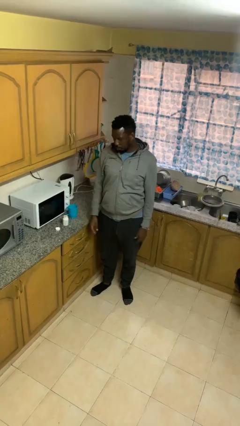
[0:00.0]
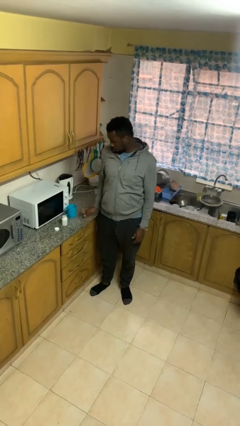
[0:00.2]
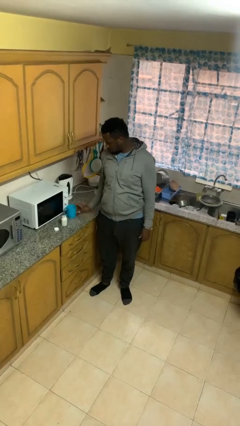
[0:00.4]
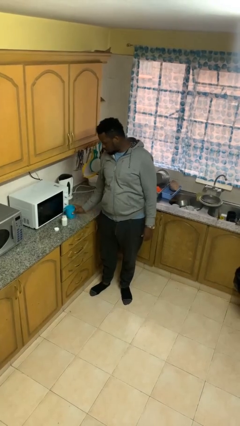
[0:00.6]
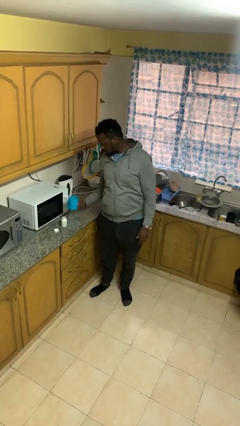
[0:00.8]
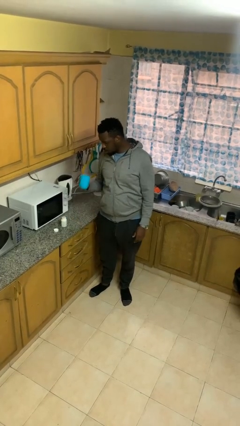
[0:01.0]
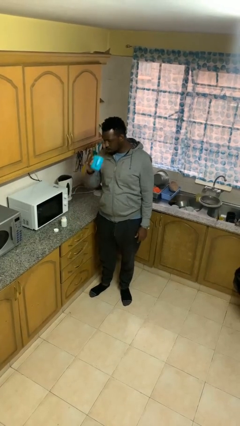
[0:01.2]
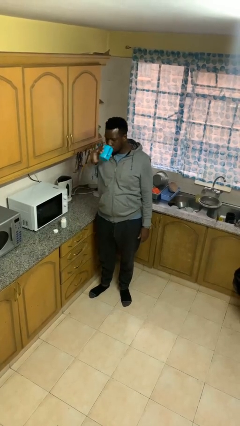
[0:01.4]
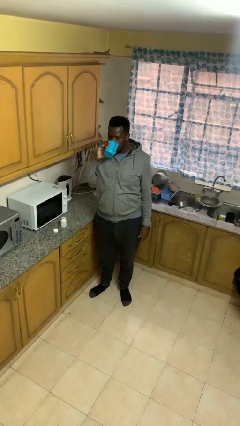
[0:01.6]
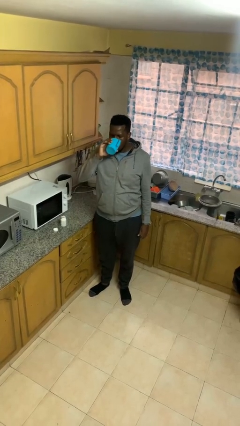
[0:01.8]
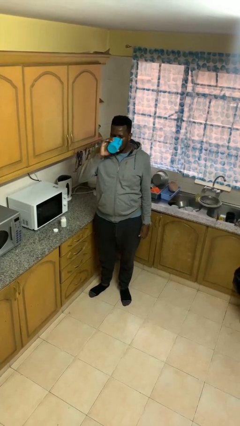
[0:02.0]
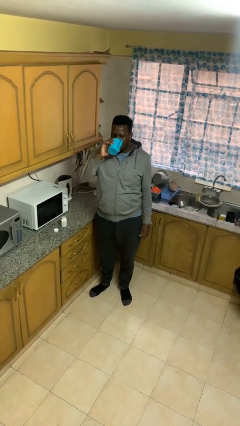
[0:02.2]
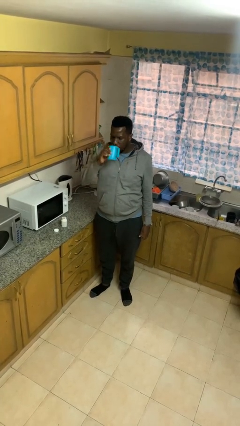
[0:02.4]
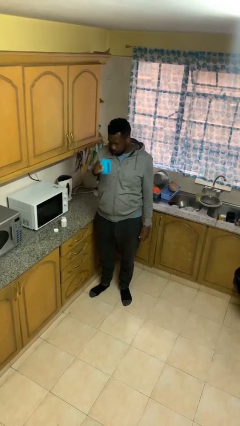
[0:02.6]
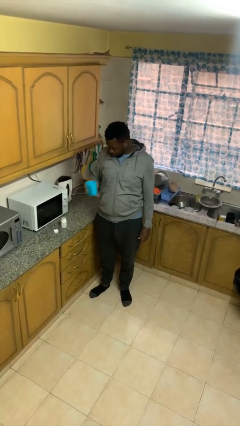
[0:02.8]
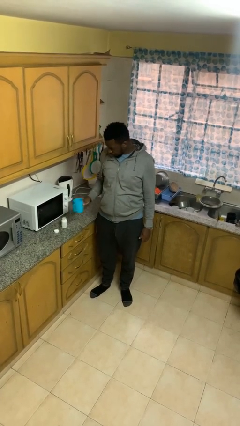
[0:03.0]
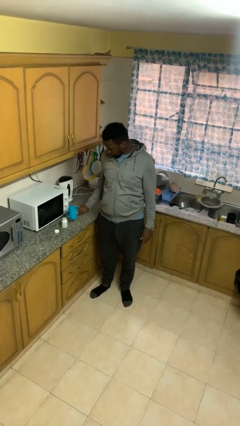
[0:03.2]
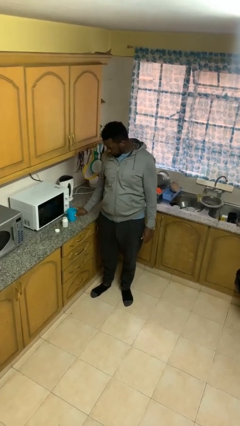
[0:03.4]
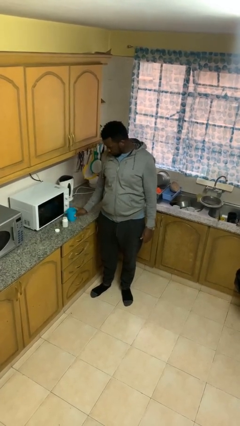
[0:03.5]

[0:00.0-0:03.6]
person drinks from cup

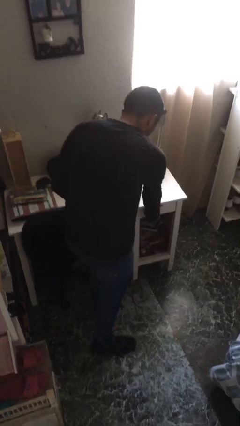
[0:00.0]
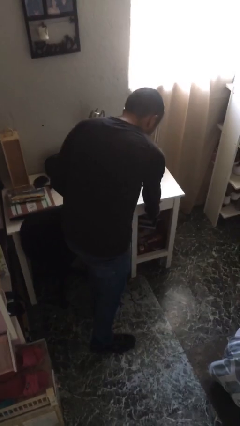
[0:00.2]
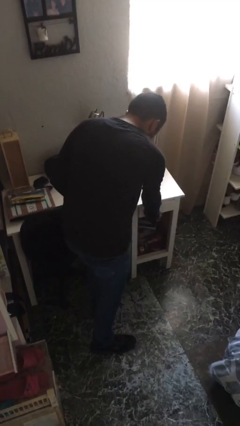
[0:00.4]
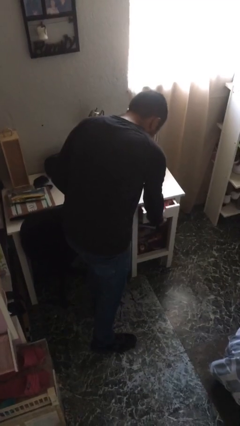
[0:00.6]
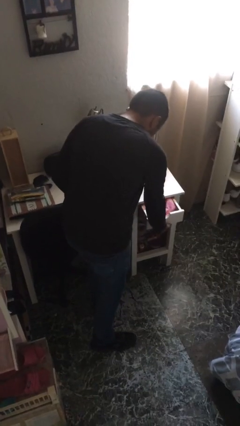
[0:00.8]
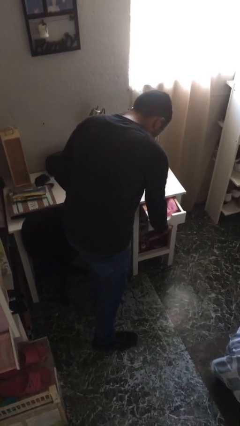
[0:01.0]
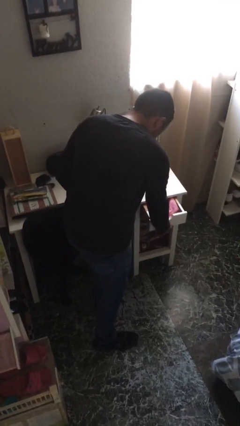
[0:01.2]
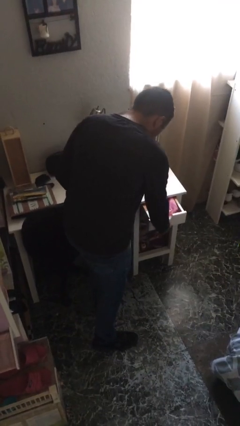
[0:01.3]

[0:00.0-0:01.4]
person opens dresser drawer

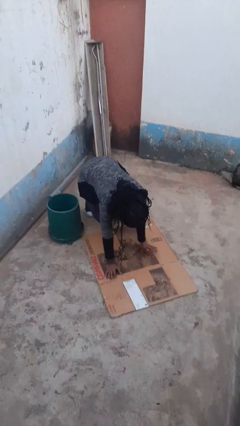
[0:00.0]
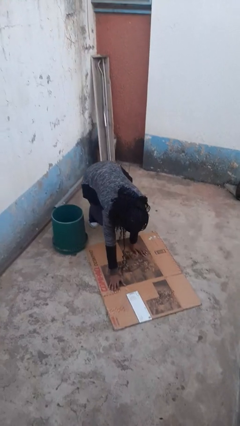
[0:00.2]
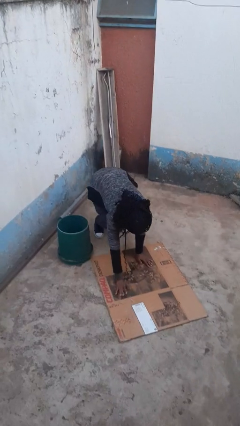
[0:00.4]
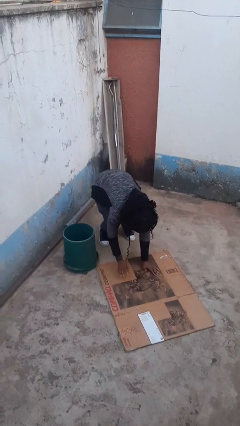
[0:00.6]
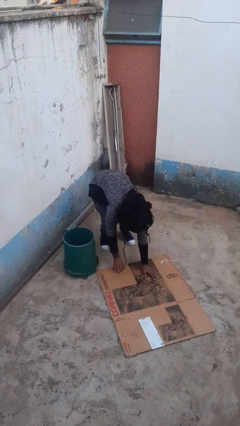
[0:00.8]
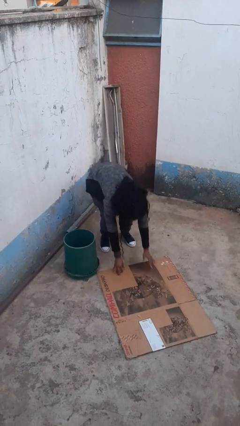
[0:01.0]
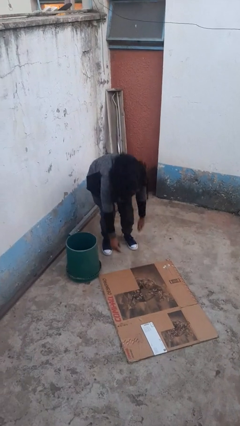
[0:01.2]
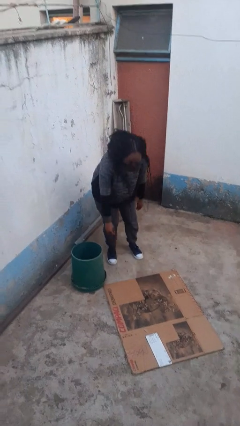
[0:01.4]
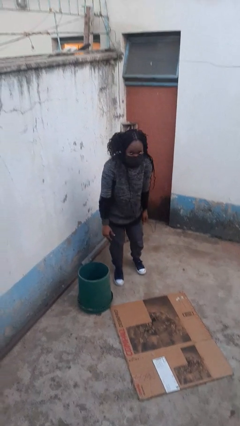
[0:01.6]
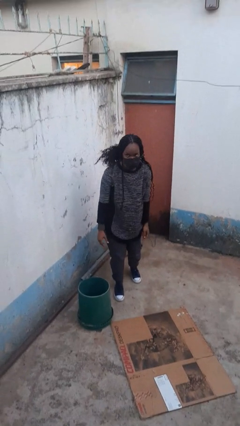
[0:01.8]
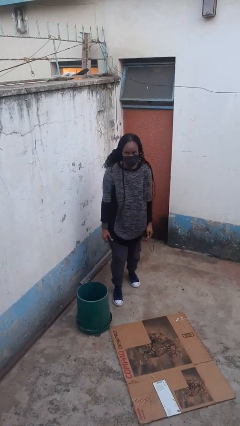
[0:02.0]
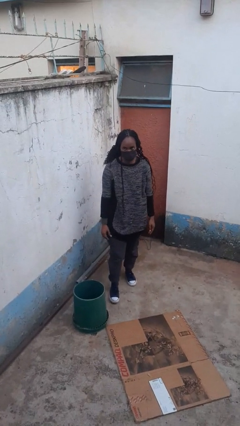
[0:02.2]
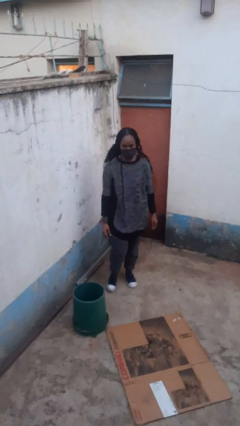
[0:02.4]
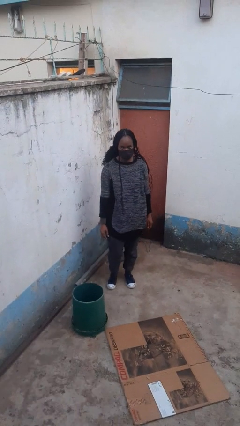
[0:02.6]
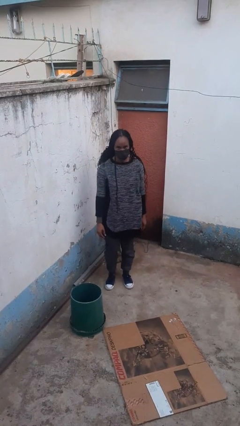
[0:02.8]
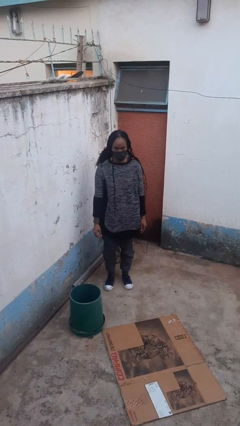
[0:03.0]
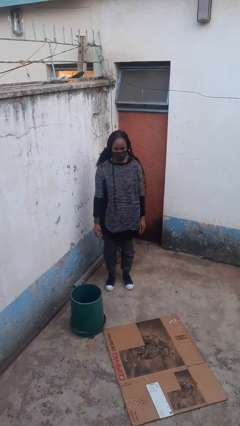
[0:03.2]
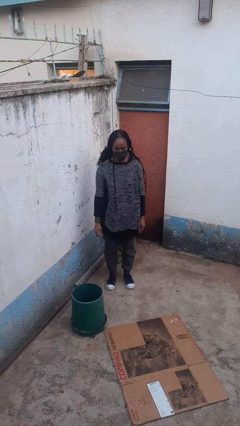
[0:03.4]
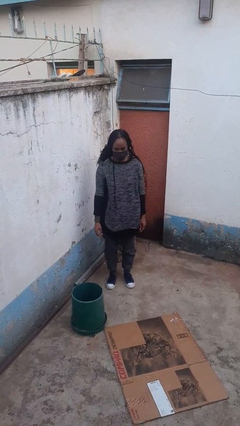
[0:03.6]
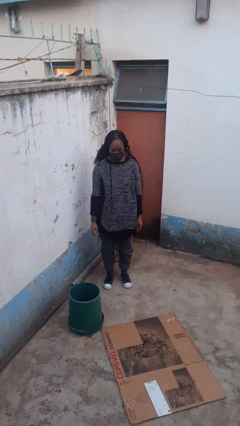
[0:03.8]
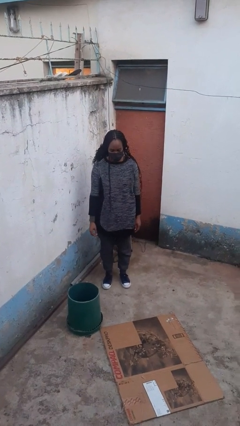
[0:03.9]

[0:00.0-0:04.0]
person stands up from floor

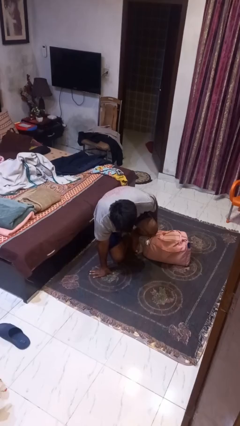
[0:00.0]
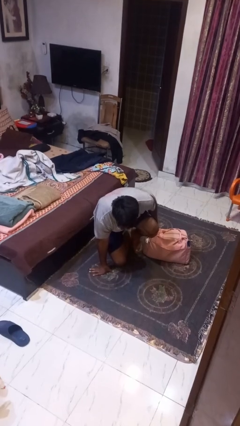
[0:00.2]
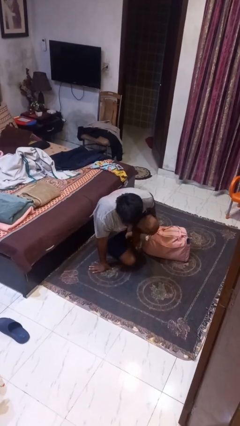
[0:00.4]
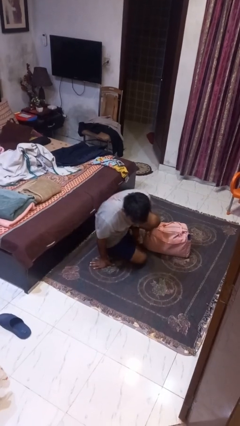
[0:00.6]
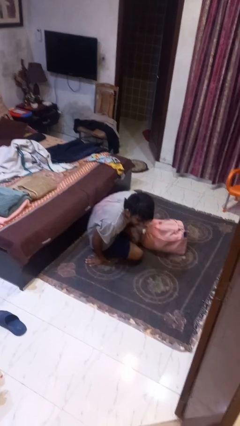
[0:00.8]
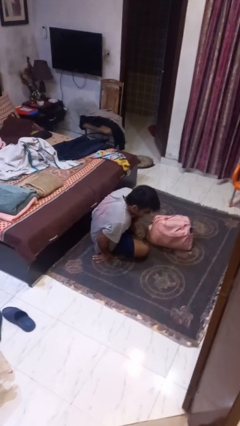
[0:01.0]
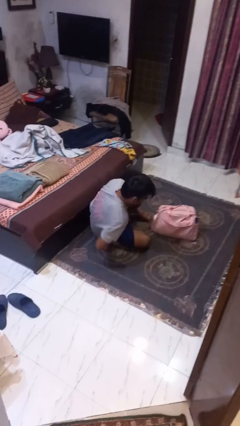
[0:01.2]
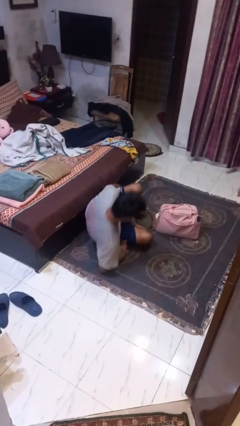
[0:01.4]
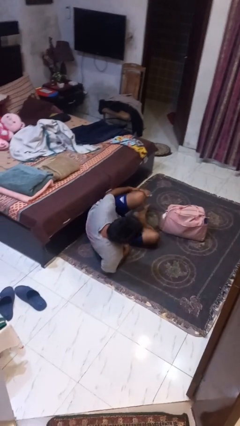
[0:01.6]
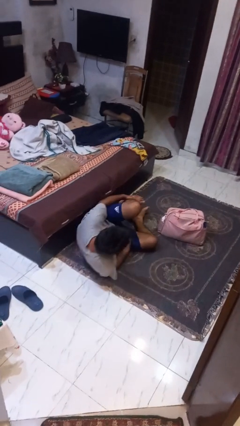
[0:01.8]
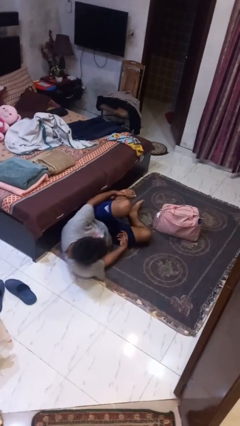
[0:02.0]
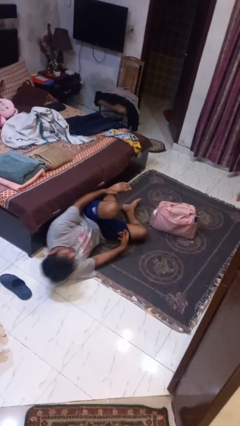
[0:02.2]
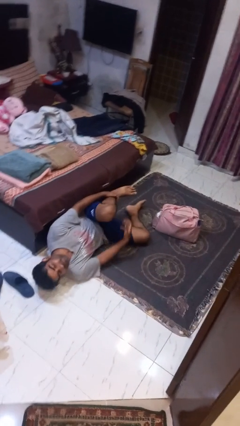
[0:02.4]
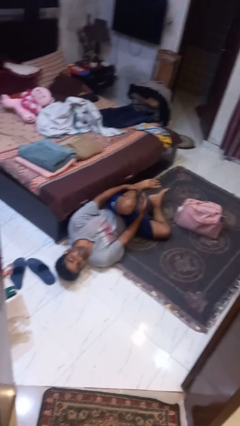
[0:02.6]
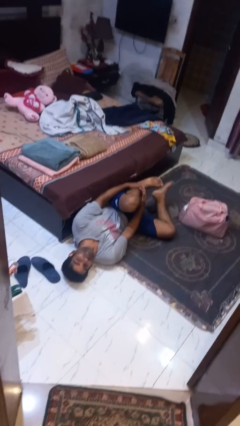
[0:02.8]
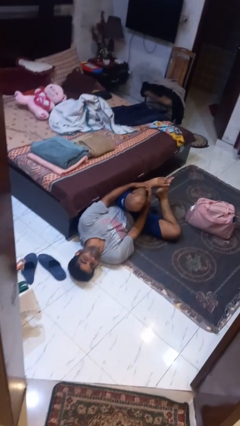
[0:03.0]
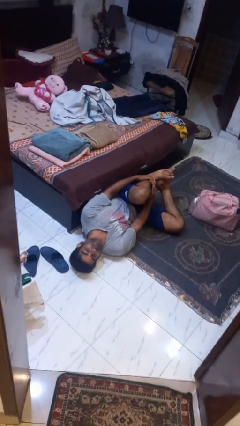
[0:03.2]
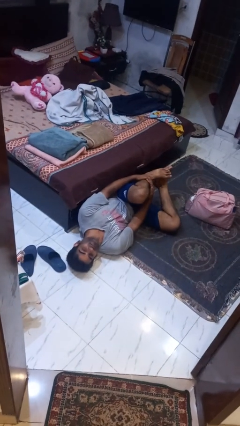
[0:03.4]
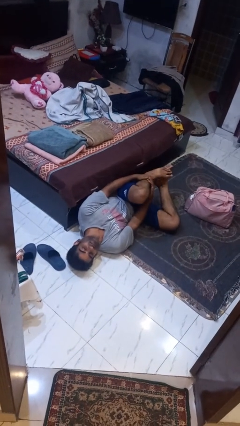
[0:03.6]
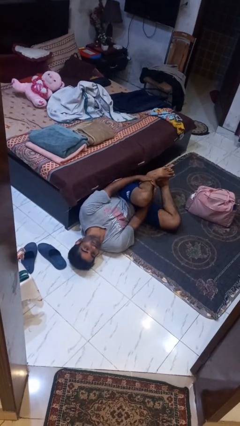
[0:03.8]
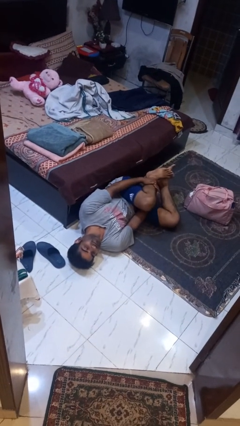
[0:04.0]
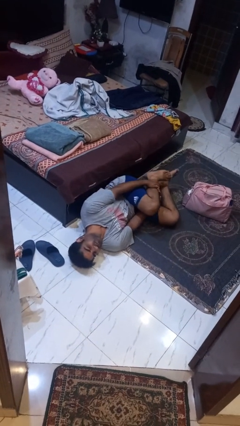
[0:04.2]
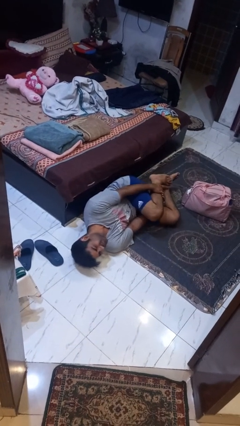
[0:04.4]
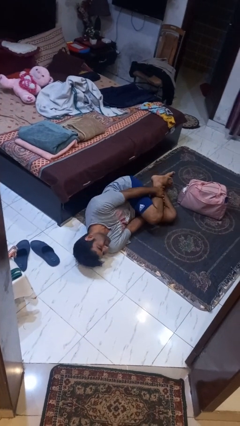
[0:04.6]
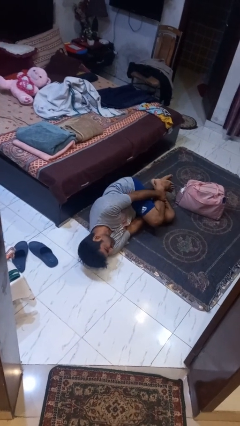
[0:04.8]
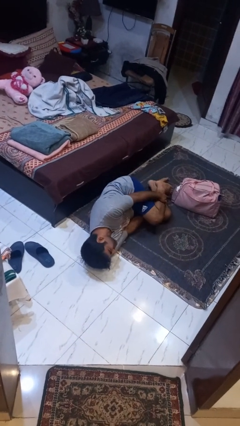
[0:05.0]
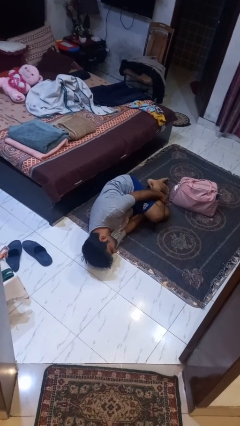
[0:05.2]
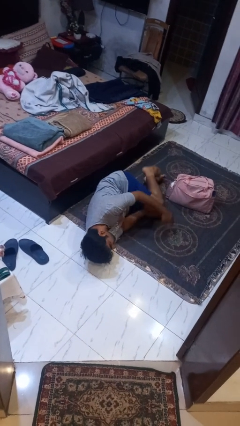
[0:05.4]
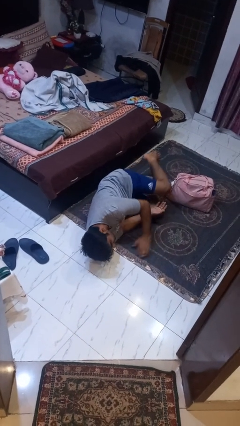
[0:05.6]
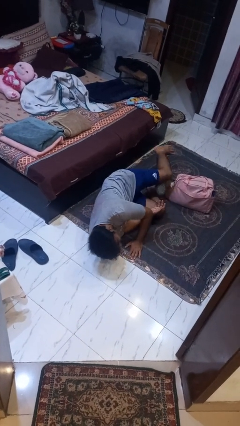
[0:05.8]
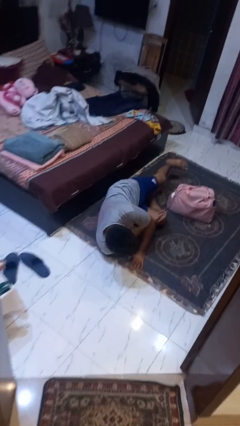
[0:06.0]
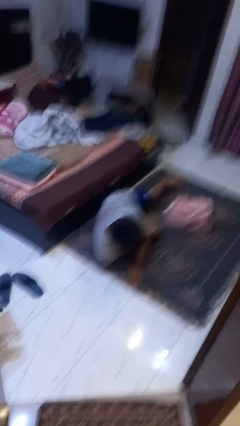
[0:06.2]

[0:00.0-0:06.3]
person lies down on floor

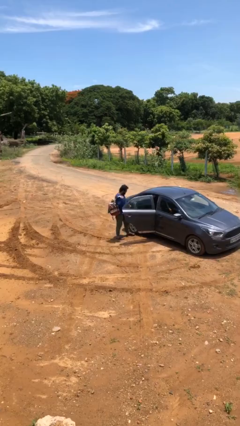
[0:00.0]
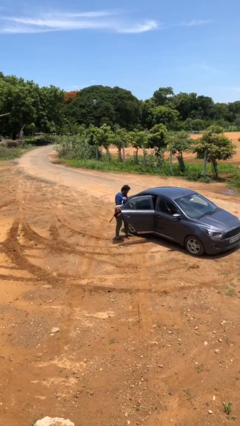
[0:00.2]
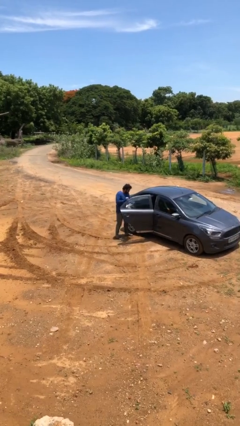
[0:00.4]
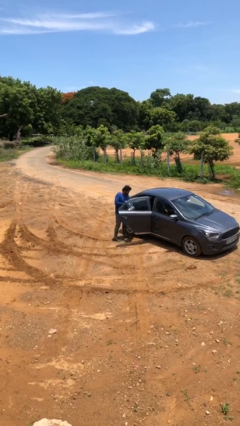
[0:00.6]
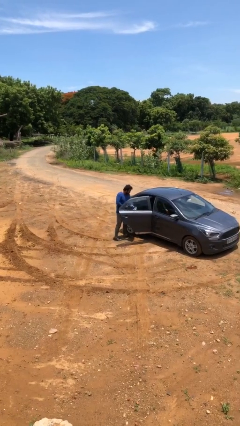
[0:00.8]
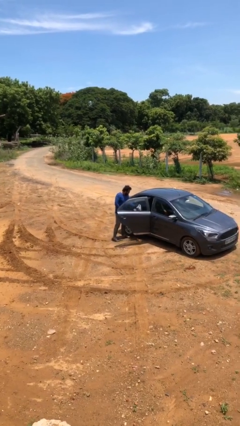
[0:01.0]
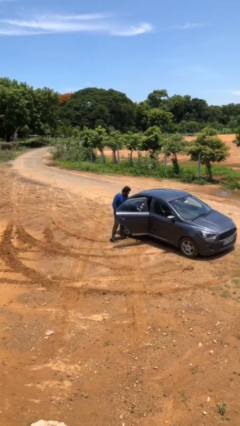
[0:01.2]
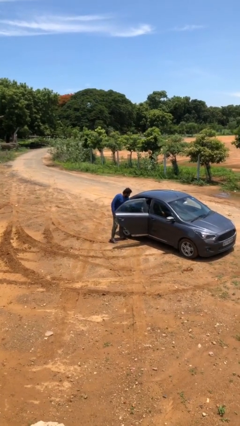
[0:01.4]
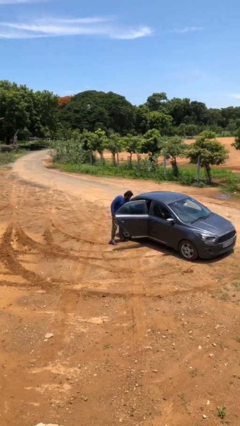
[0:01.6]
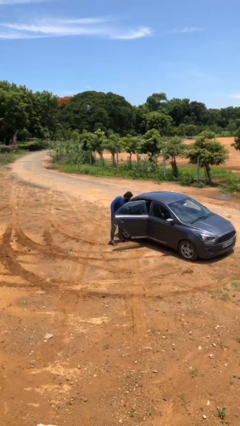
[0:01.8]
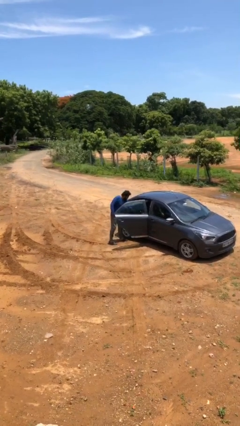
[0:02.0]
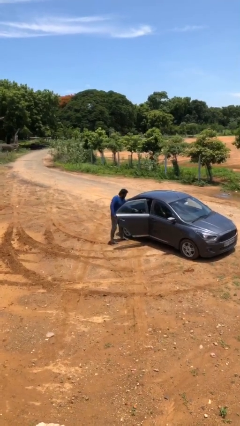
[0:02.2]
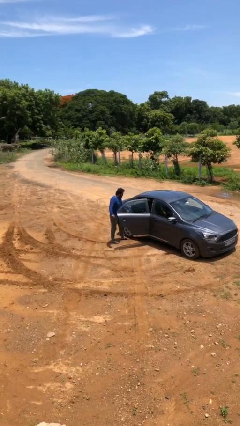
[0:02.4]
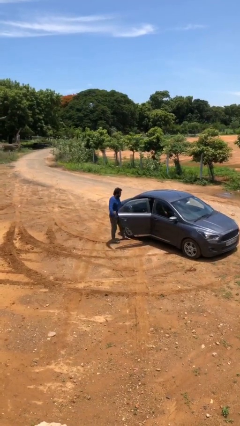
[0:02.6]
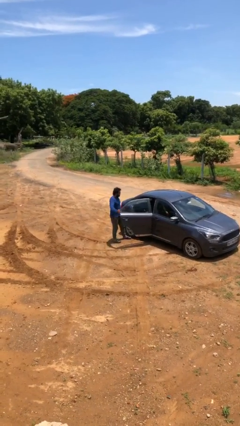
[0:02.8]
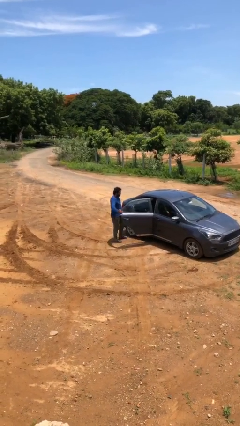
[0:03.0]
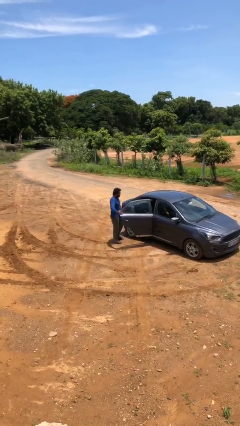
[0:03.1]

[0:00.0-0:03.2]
person loads car
